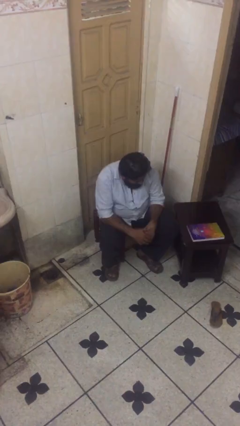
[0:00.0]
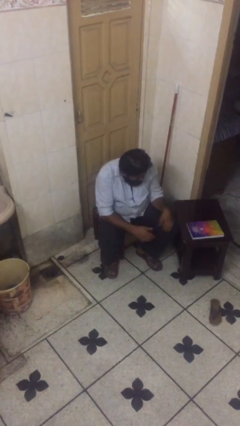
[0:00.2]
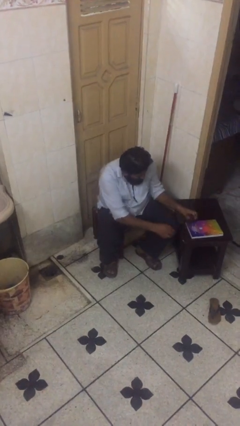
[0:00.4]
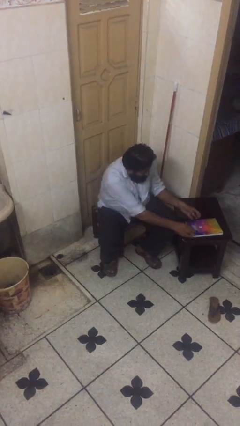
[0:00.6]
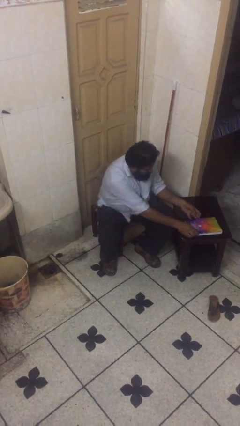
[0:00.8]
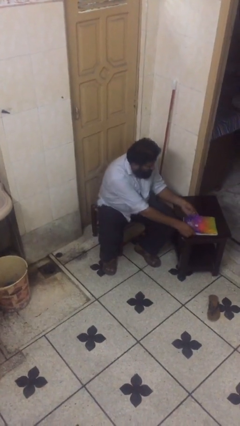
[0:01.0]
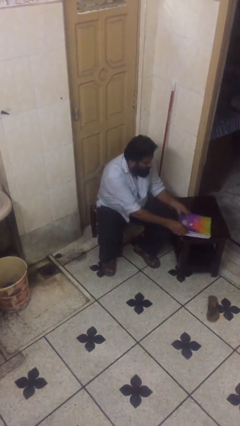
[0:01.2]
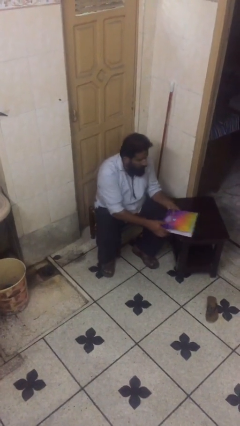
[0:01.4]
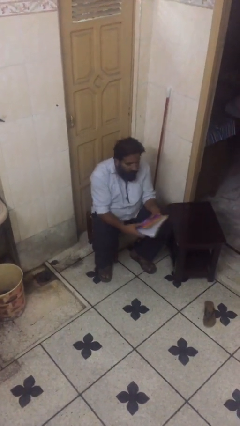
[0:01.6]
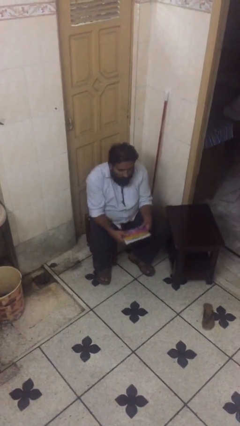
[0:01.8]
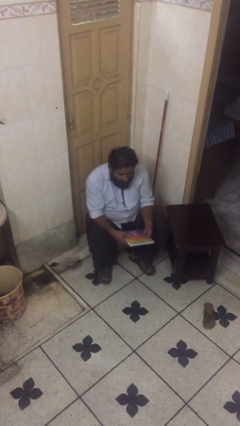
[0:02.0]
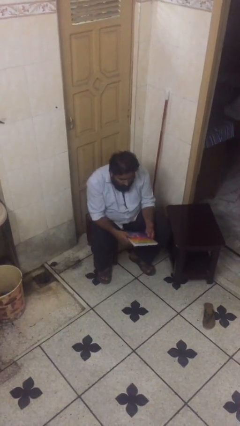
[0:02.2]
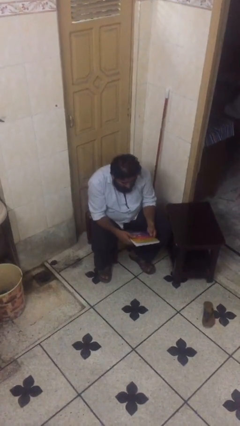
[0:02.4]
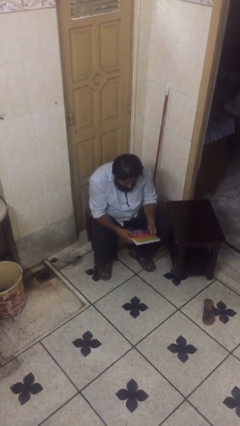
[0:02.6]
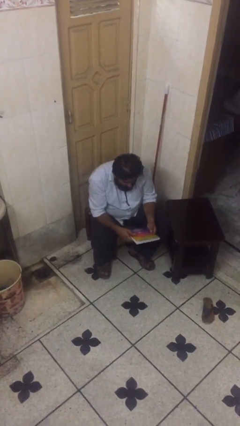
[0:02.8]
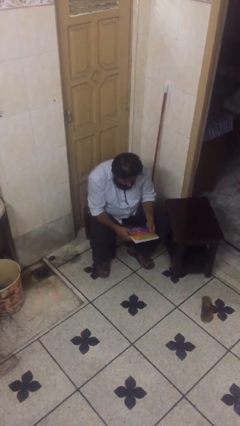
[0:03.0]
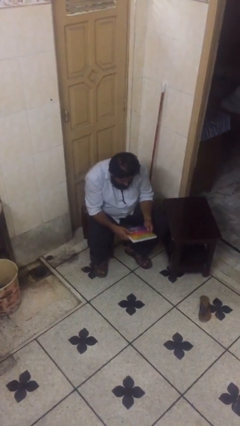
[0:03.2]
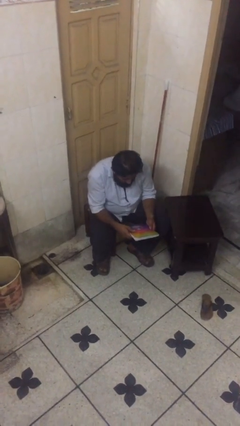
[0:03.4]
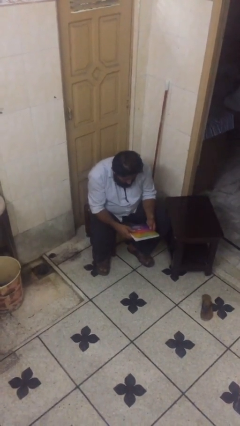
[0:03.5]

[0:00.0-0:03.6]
person picks up object from table

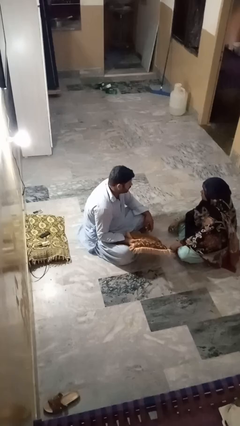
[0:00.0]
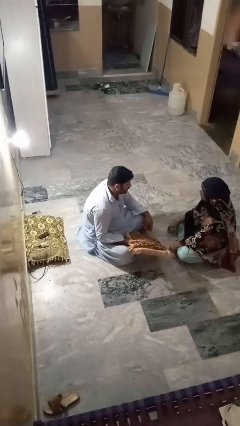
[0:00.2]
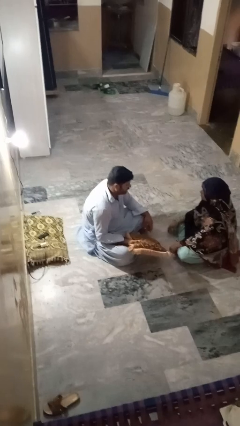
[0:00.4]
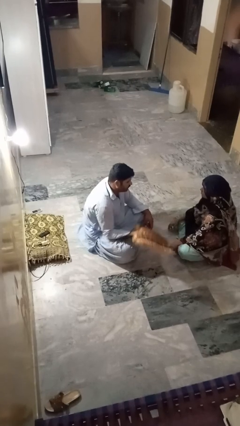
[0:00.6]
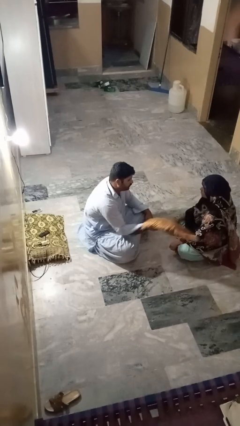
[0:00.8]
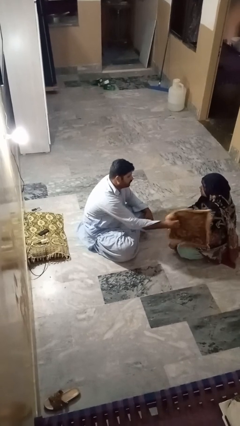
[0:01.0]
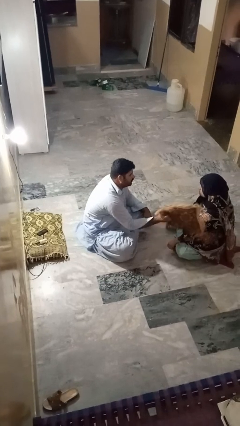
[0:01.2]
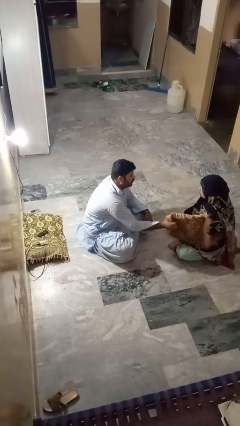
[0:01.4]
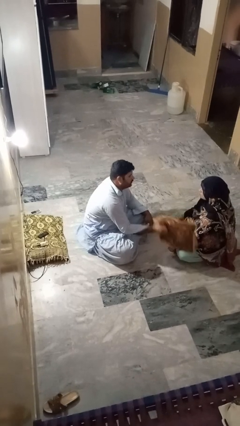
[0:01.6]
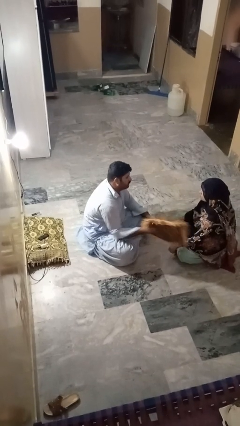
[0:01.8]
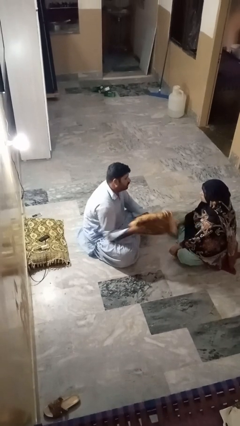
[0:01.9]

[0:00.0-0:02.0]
person hits person with pillow

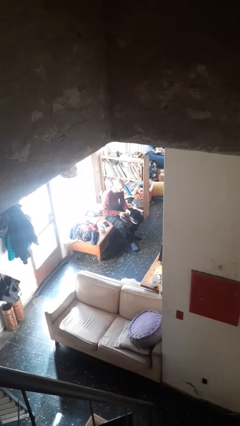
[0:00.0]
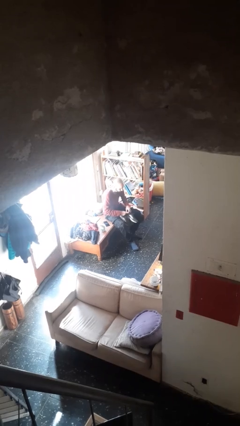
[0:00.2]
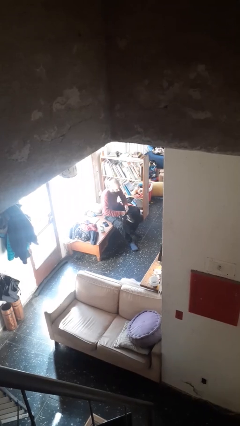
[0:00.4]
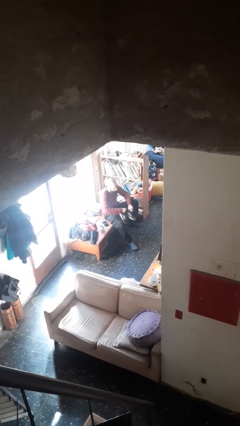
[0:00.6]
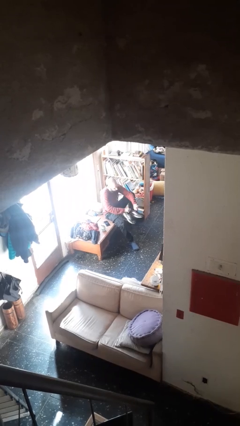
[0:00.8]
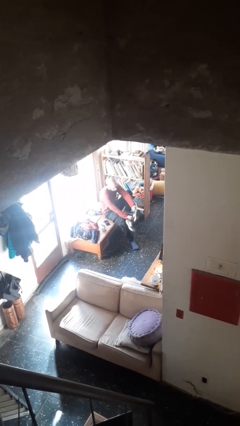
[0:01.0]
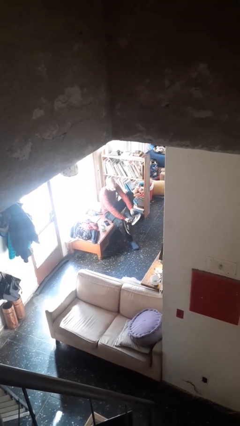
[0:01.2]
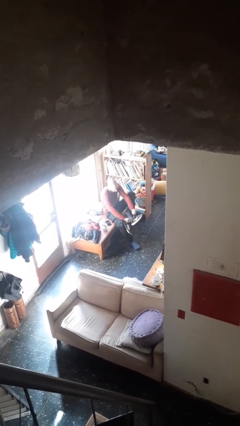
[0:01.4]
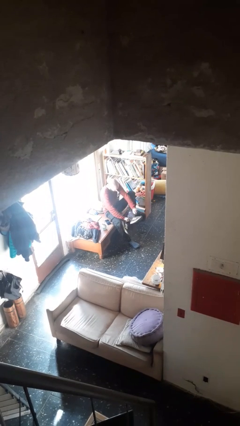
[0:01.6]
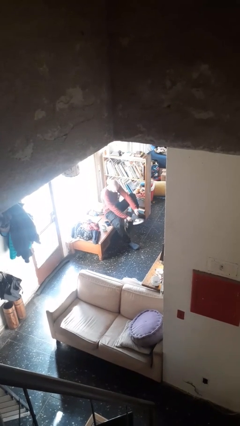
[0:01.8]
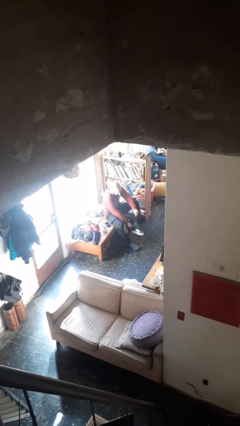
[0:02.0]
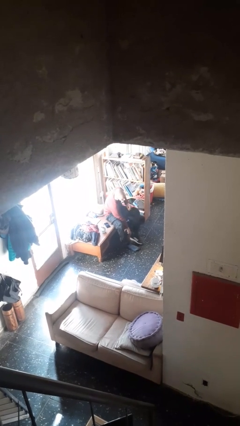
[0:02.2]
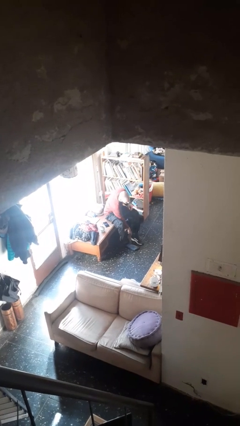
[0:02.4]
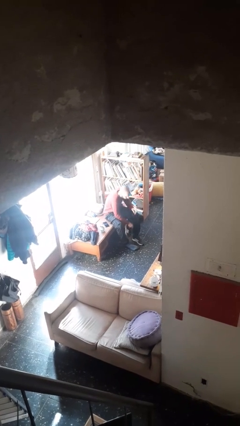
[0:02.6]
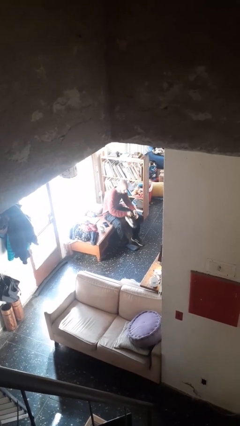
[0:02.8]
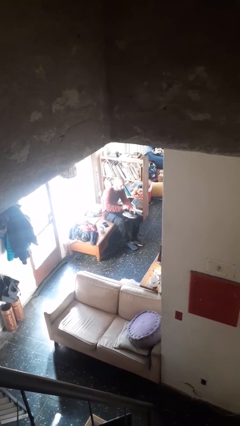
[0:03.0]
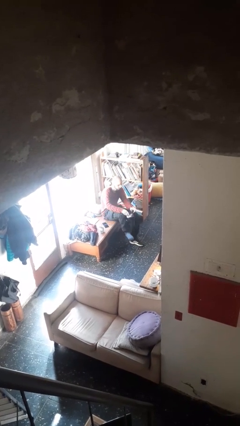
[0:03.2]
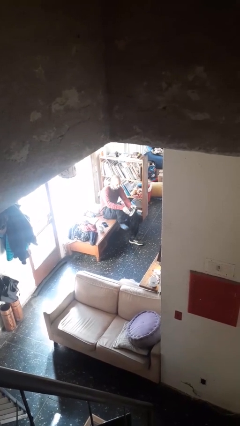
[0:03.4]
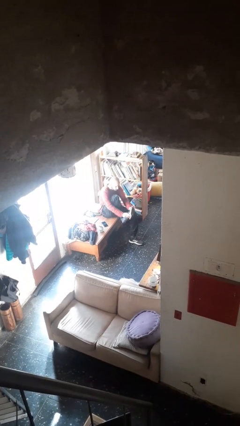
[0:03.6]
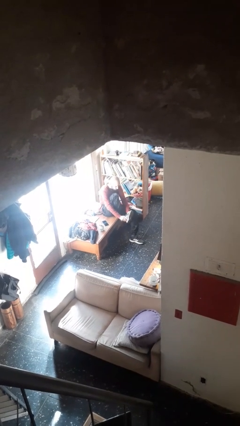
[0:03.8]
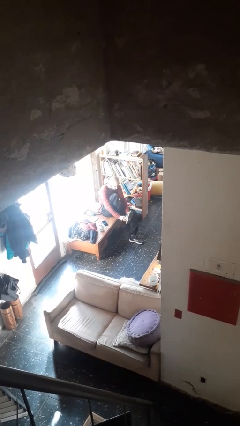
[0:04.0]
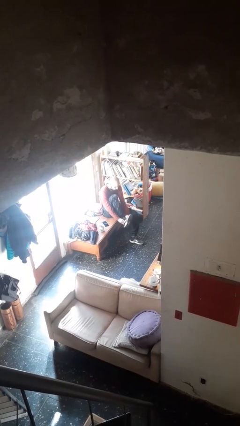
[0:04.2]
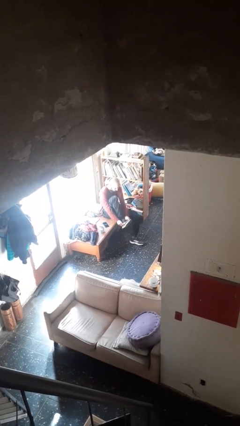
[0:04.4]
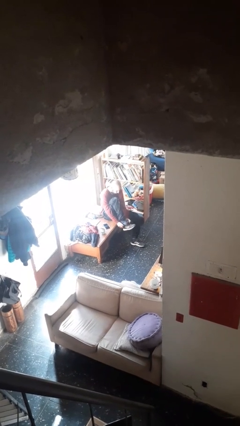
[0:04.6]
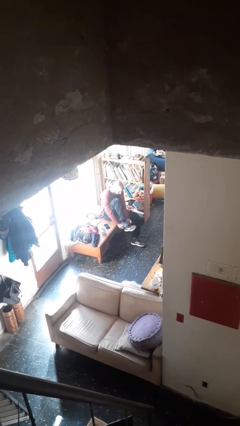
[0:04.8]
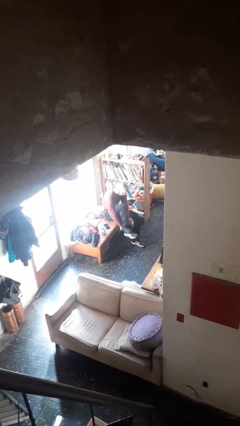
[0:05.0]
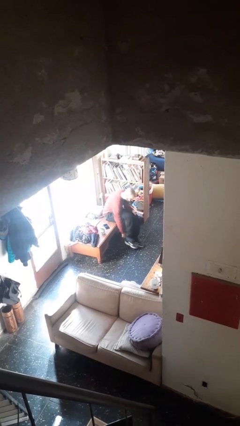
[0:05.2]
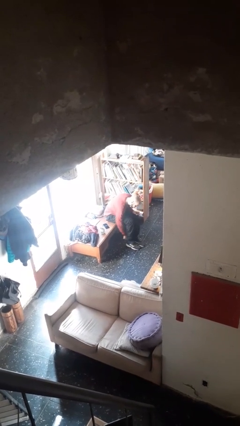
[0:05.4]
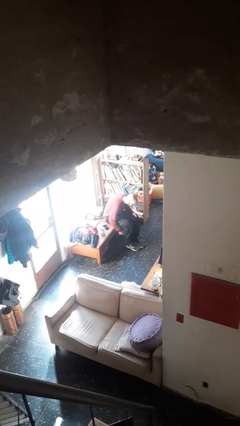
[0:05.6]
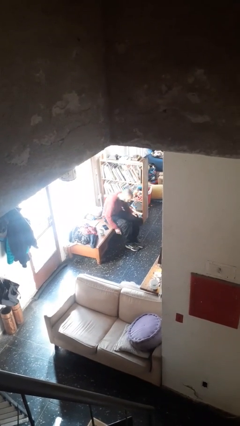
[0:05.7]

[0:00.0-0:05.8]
person puts on shoes

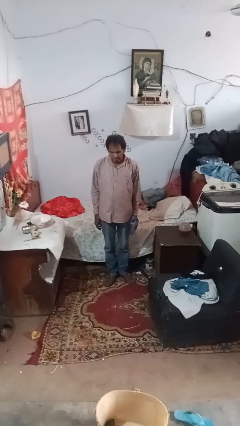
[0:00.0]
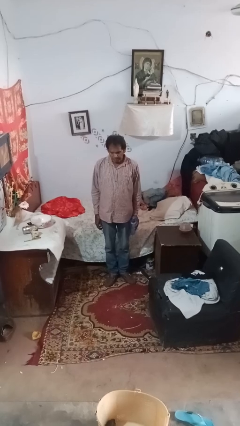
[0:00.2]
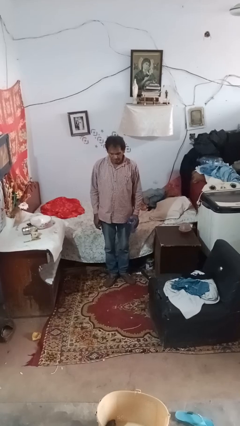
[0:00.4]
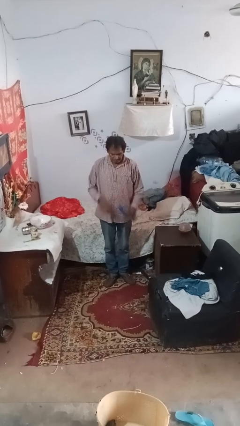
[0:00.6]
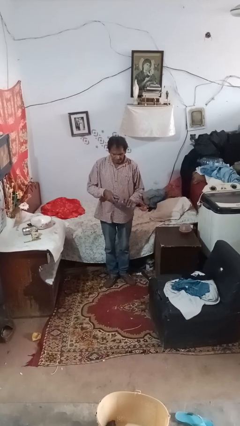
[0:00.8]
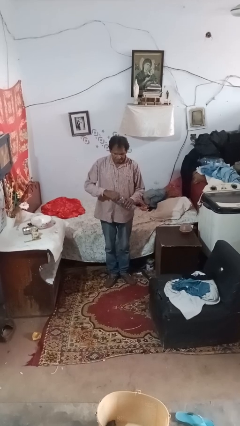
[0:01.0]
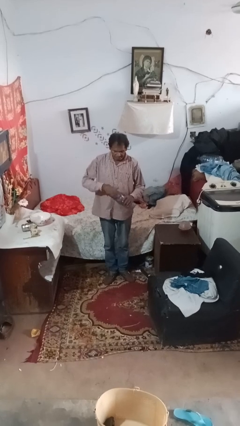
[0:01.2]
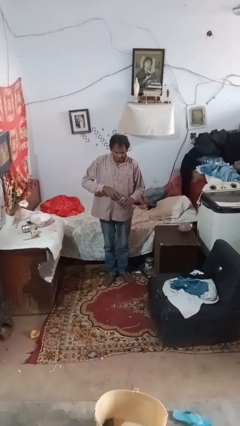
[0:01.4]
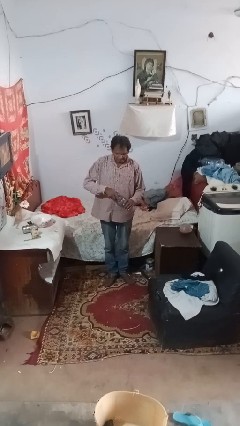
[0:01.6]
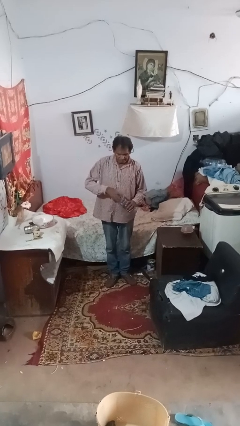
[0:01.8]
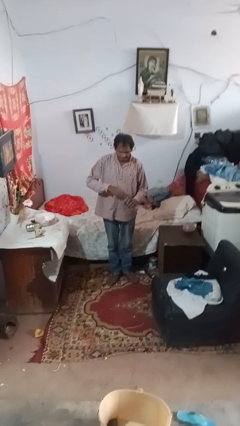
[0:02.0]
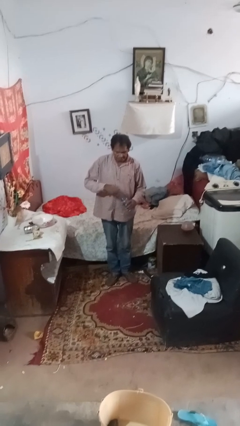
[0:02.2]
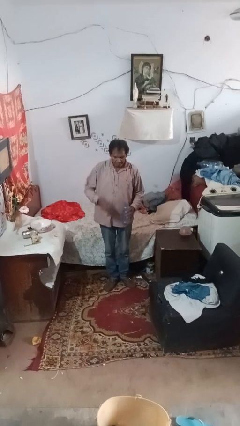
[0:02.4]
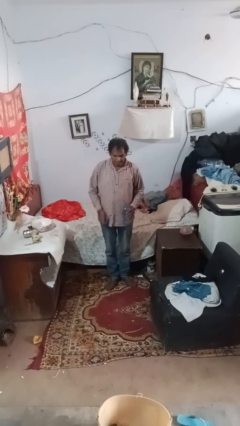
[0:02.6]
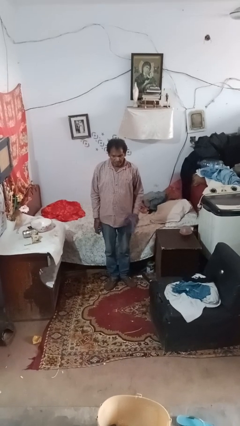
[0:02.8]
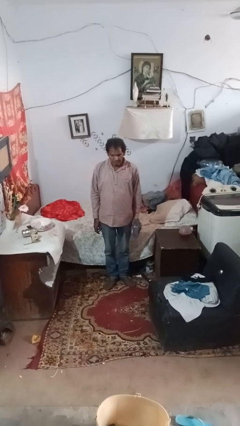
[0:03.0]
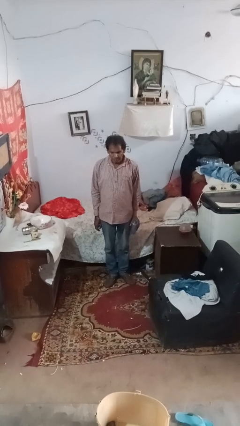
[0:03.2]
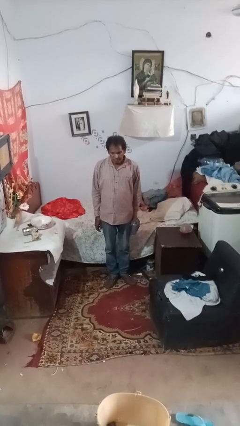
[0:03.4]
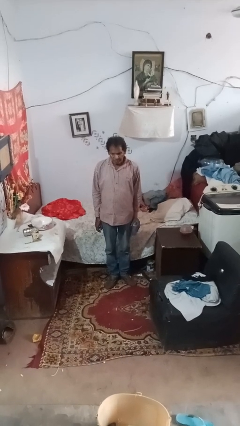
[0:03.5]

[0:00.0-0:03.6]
person unscrews lid from bottle

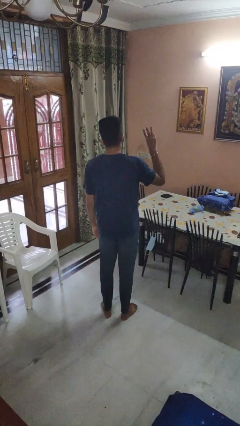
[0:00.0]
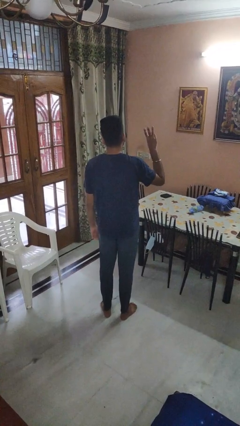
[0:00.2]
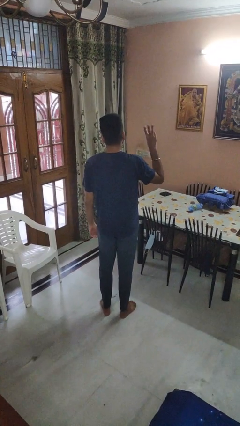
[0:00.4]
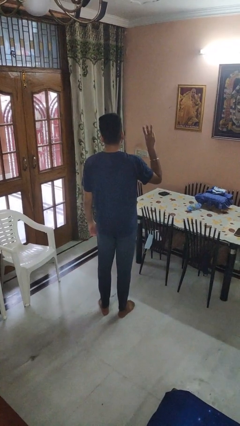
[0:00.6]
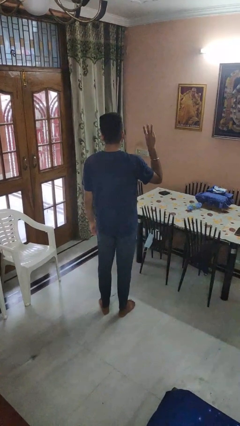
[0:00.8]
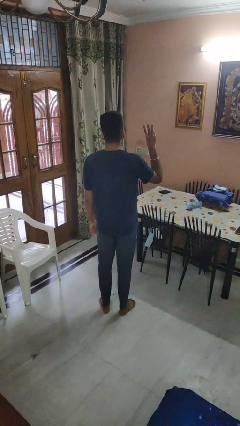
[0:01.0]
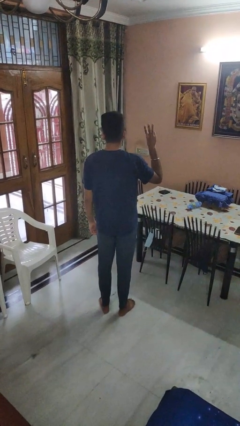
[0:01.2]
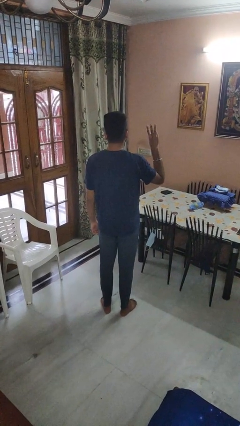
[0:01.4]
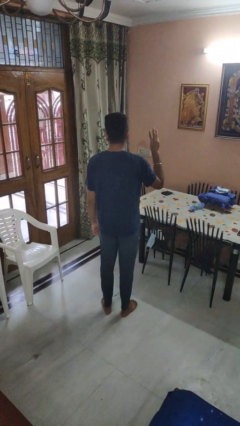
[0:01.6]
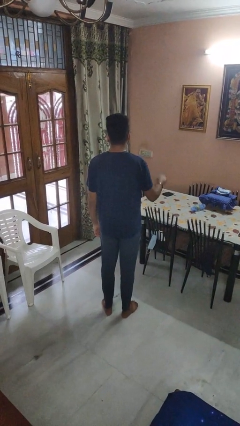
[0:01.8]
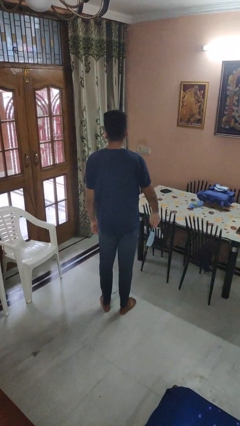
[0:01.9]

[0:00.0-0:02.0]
person gestures number three

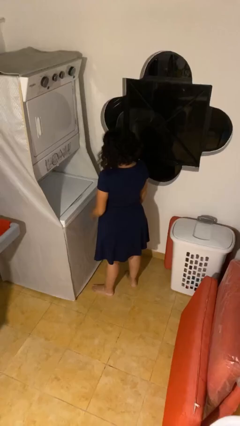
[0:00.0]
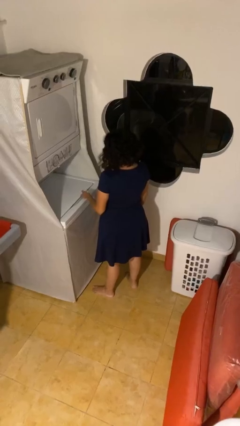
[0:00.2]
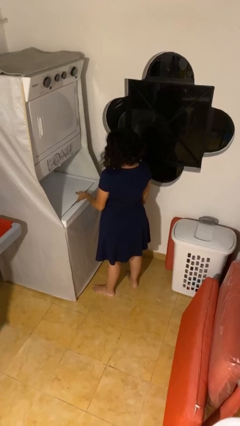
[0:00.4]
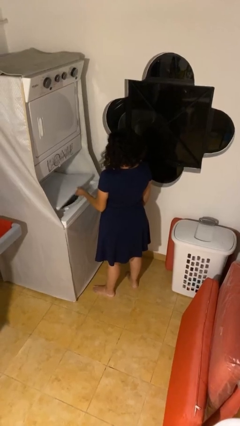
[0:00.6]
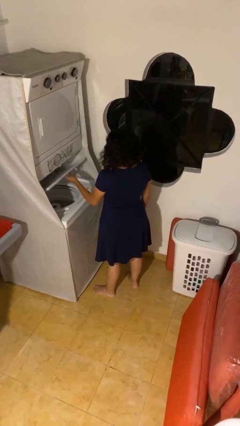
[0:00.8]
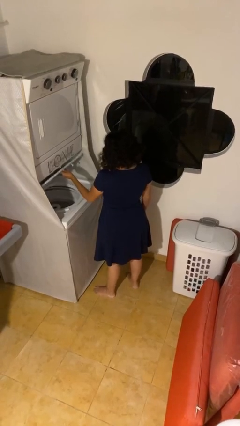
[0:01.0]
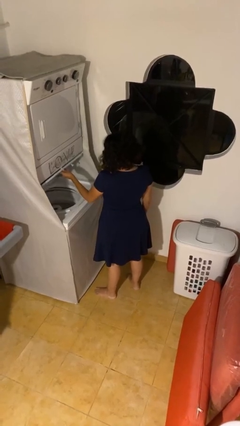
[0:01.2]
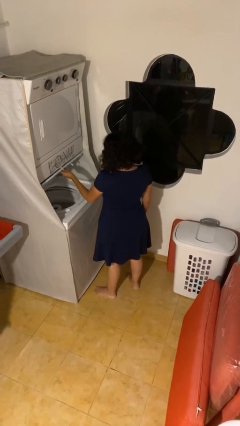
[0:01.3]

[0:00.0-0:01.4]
person opens clothes washer
